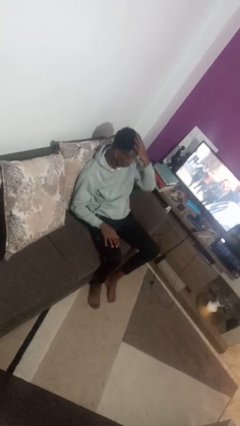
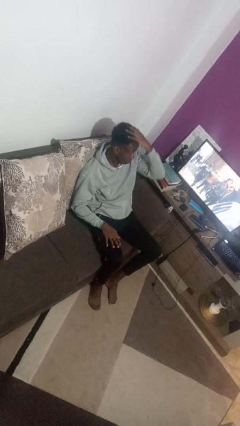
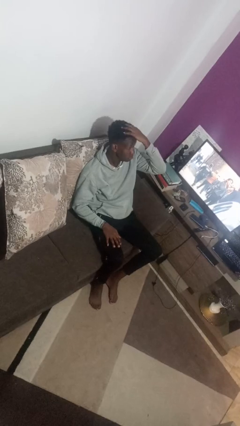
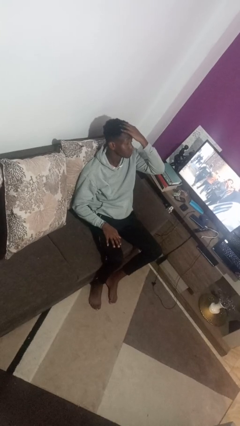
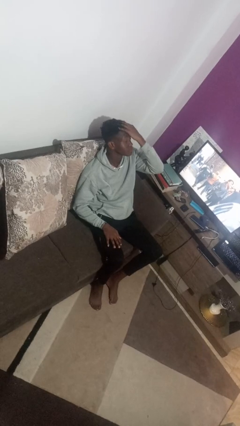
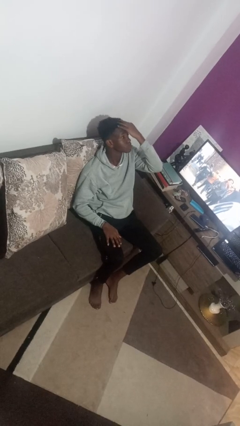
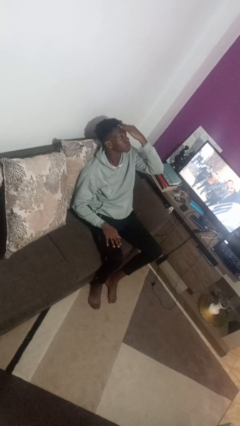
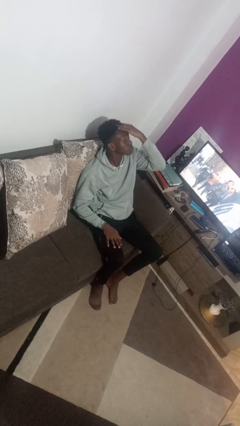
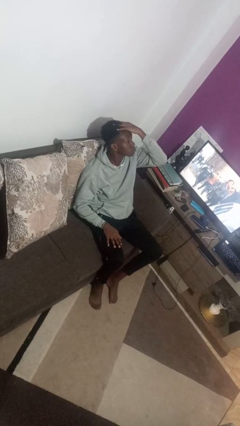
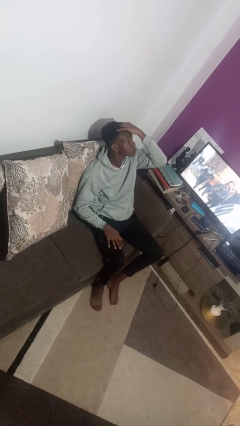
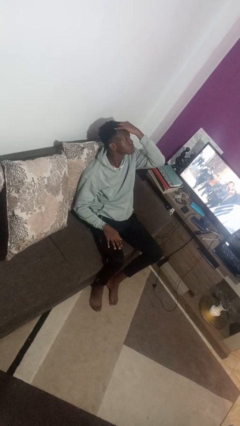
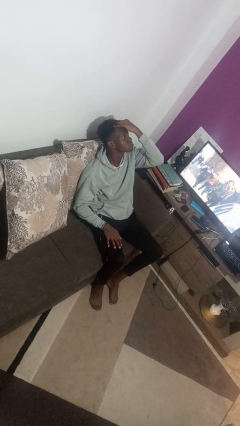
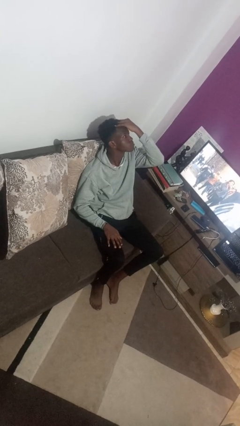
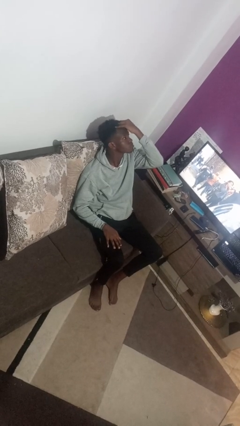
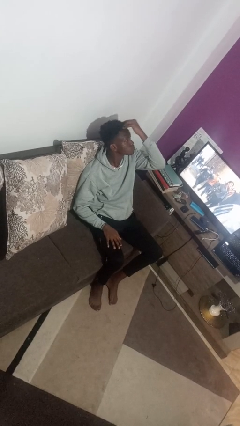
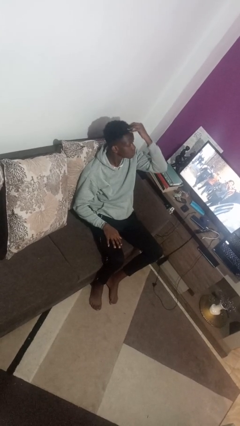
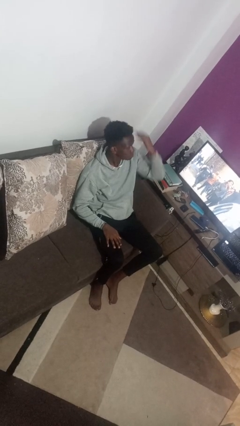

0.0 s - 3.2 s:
person strokes hair

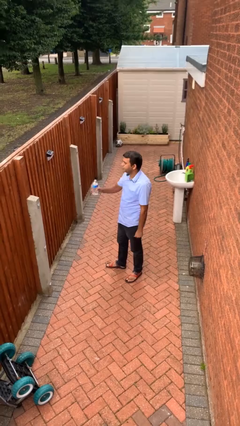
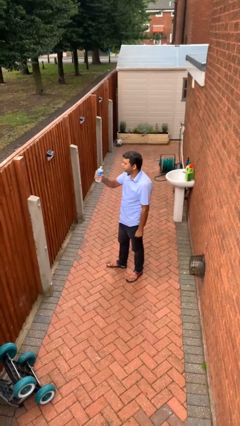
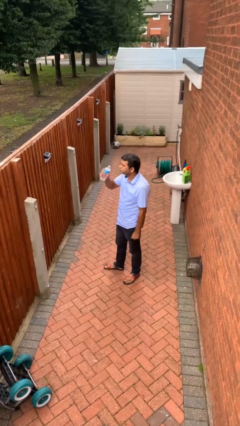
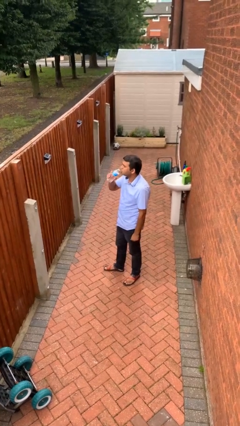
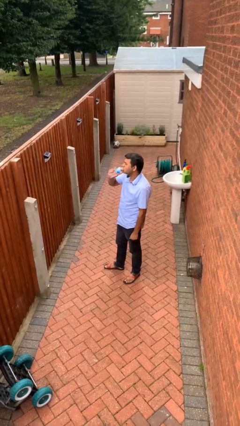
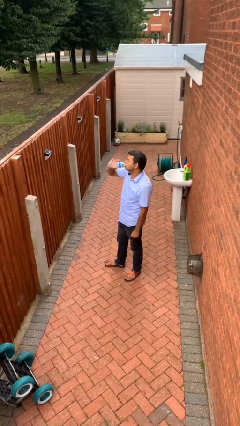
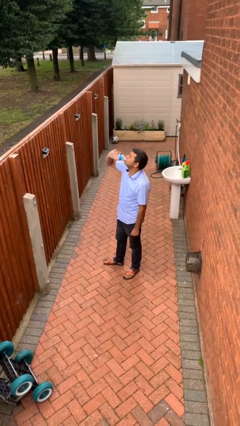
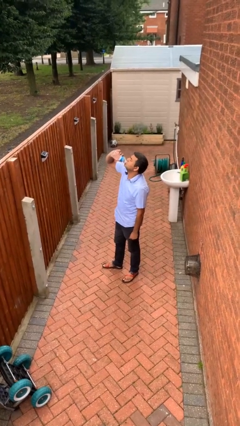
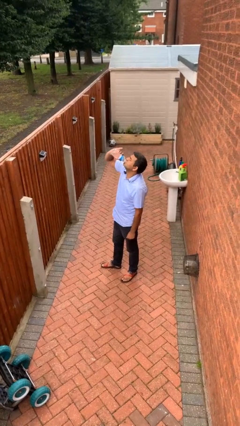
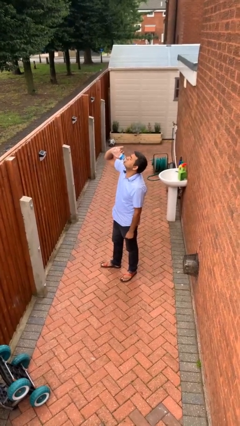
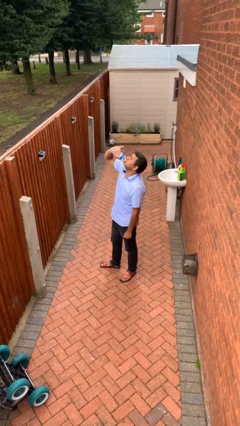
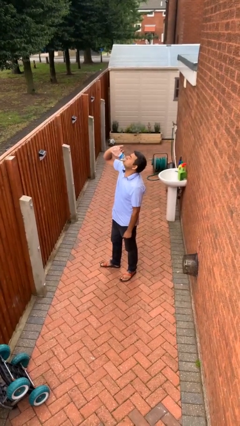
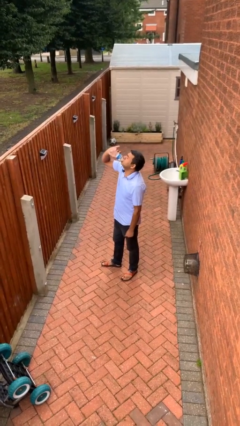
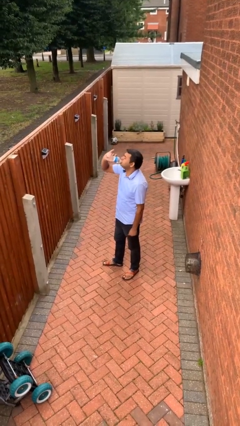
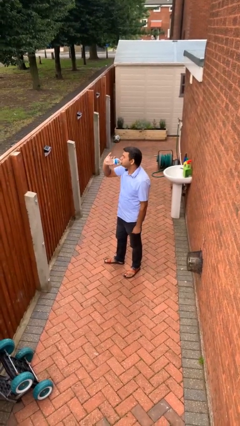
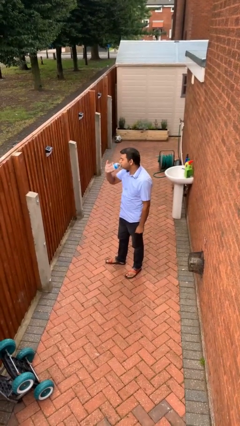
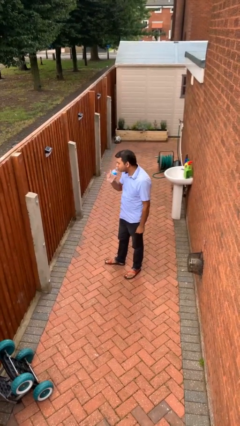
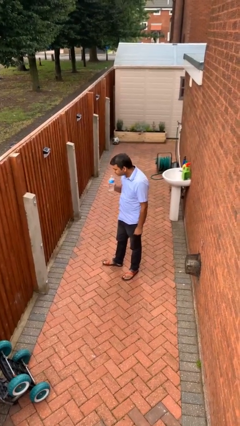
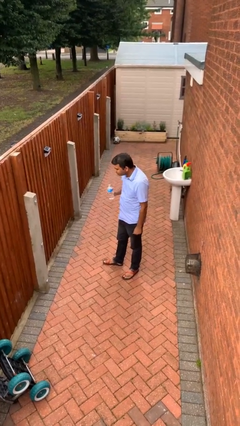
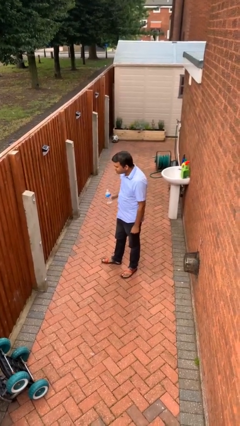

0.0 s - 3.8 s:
person drinks from bottle

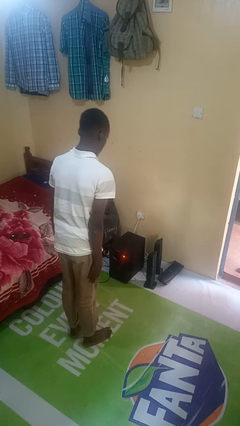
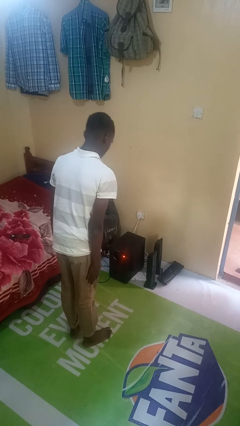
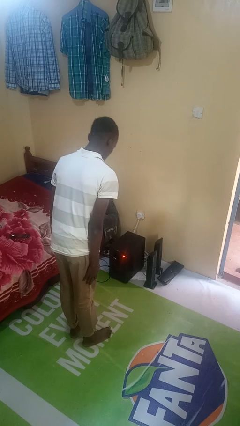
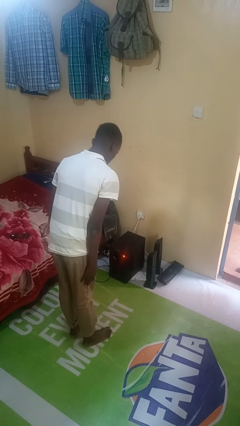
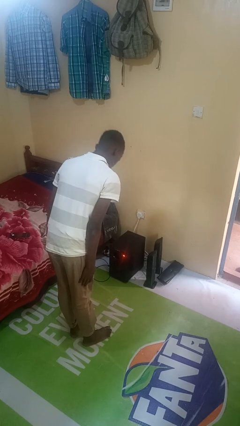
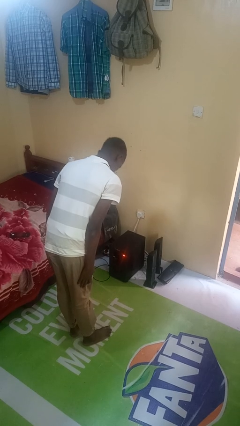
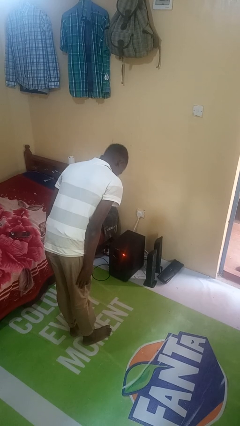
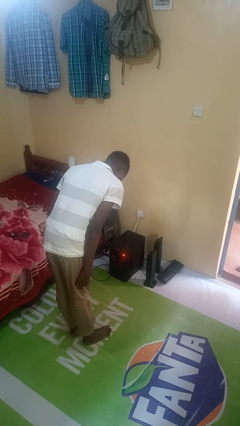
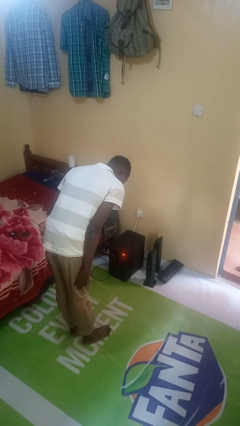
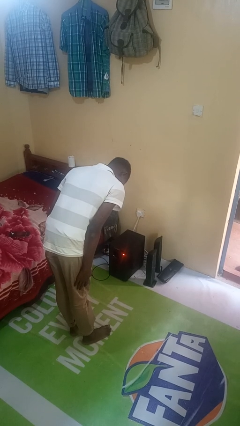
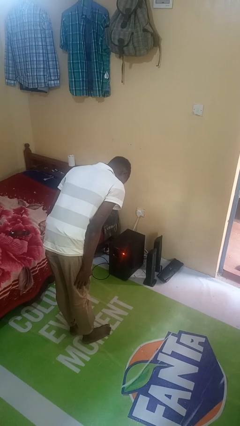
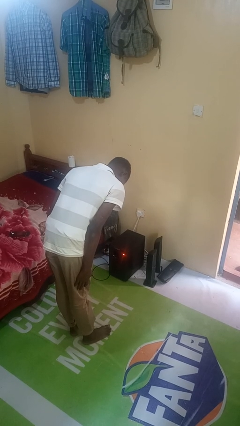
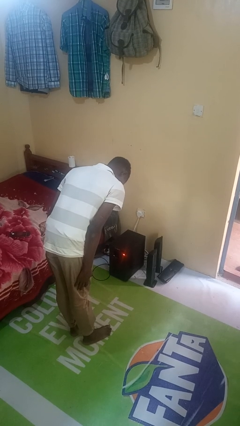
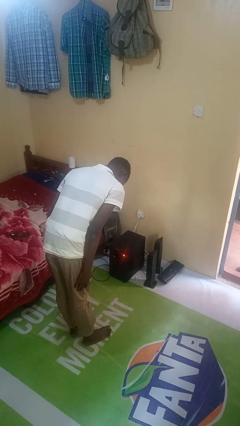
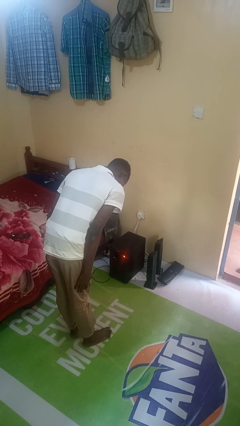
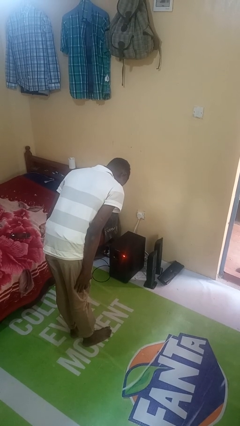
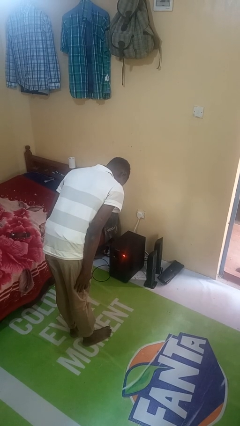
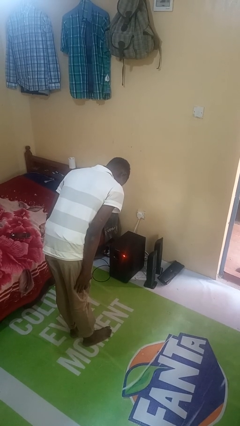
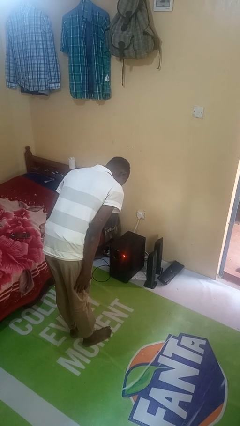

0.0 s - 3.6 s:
person bows

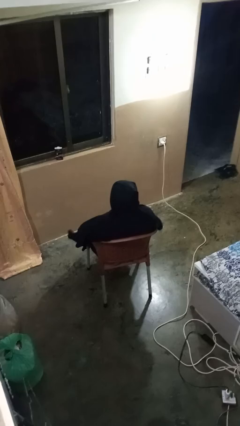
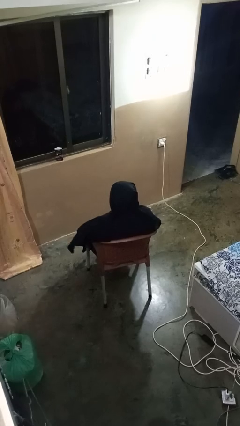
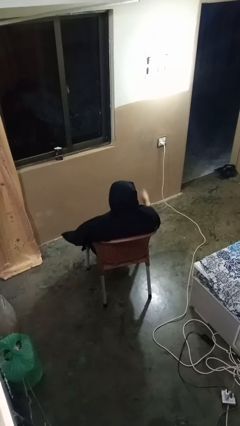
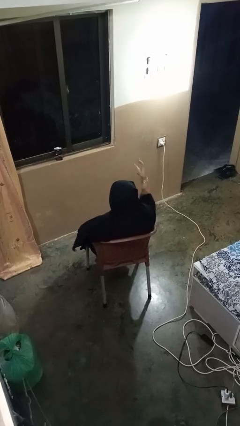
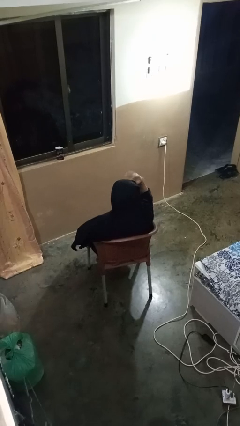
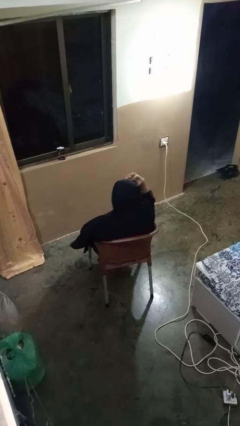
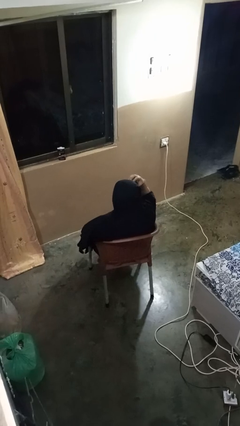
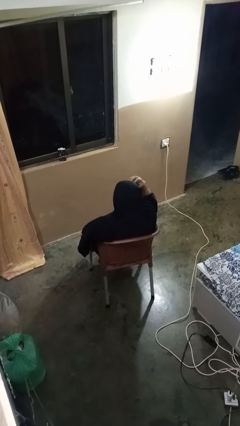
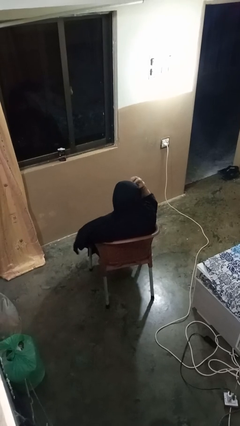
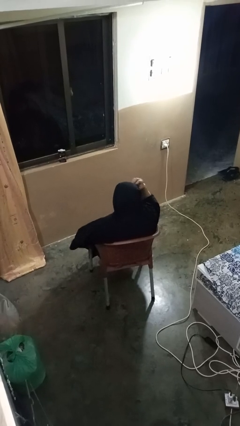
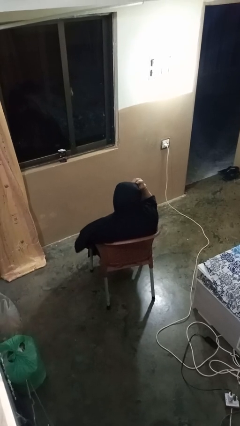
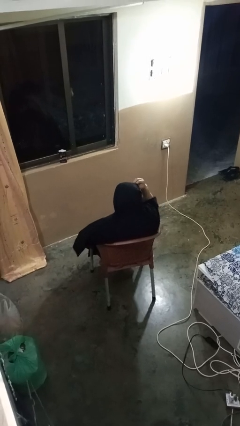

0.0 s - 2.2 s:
person scratches face

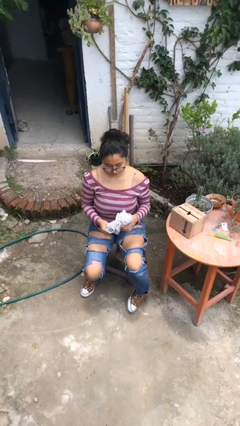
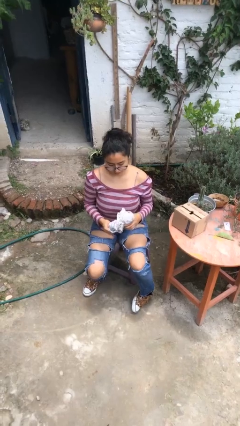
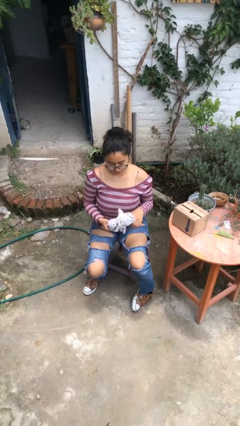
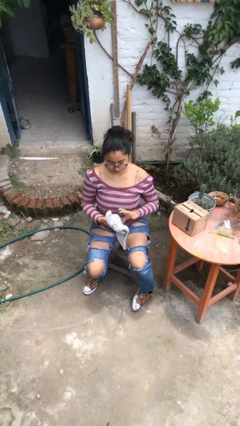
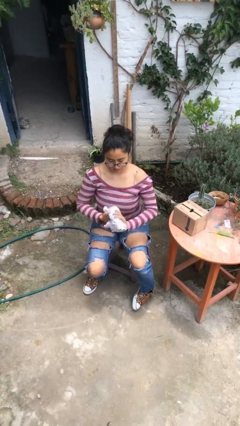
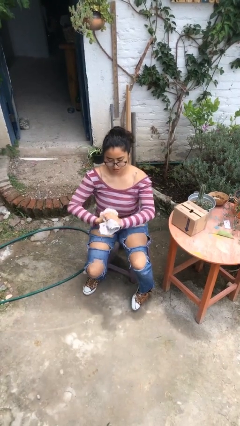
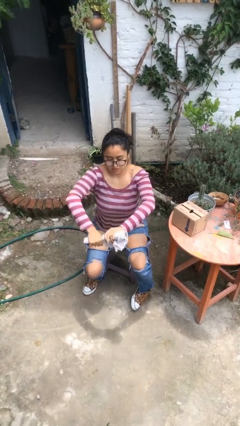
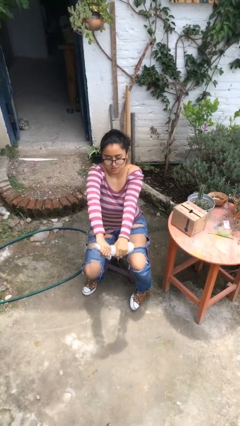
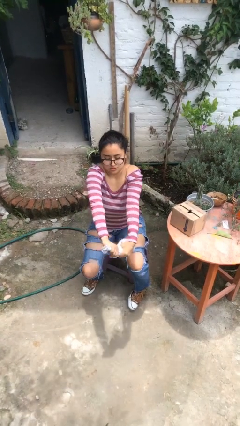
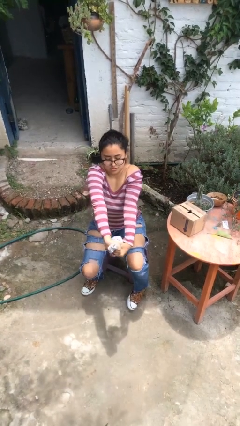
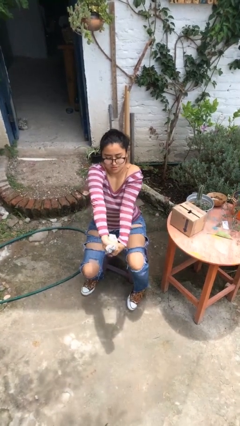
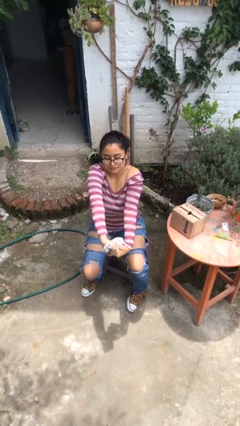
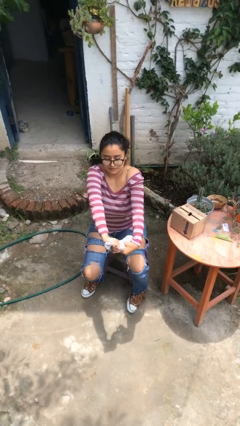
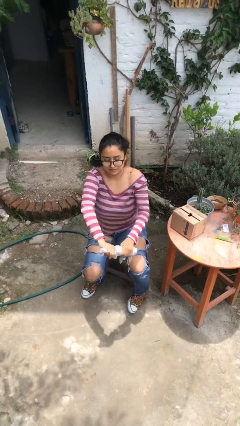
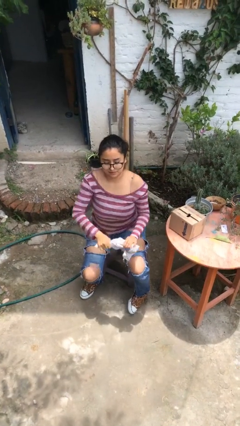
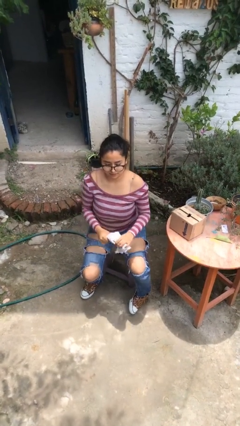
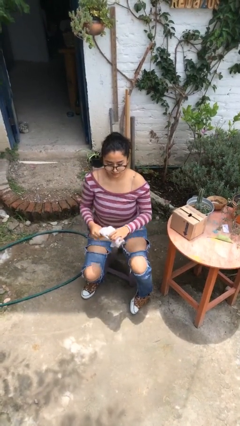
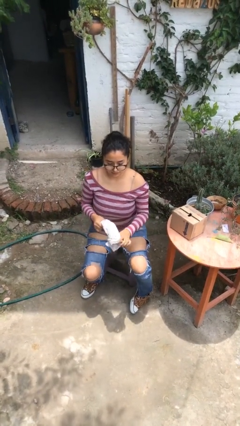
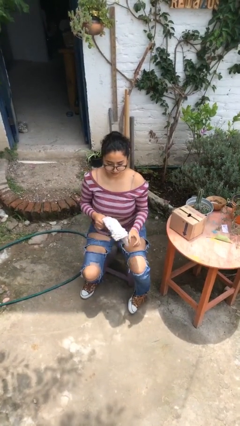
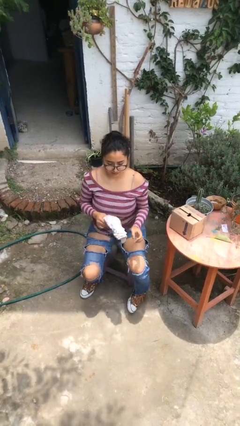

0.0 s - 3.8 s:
person squeezes object

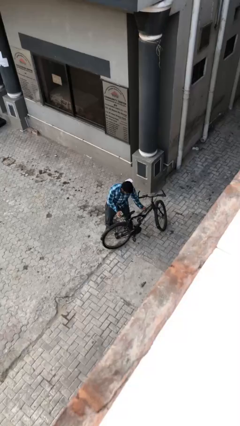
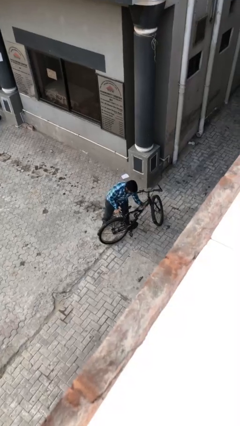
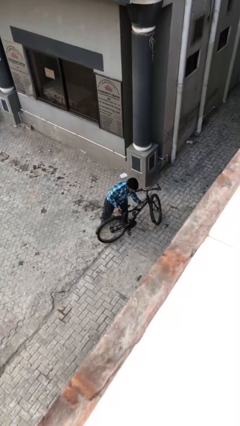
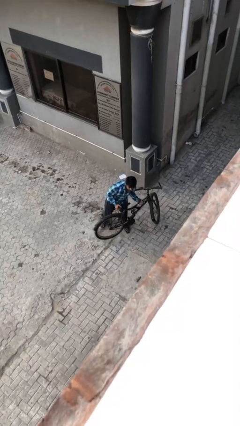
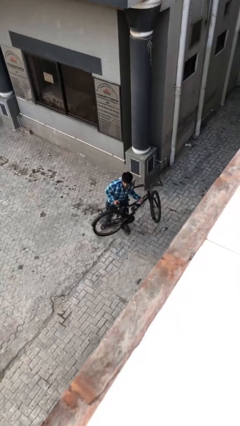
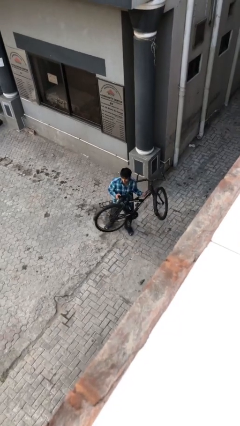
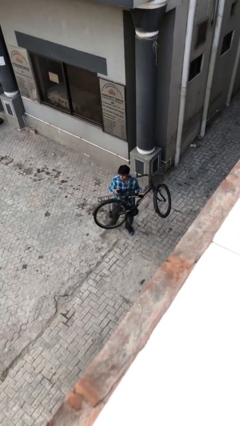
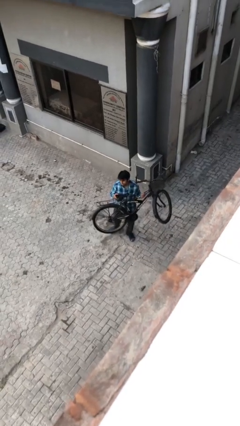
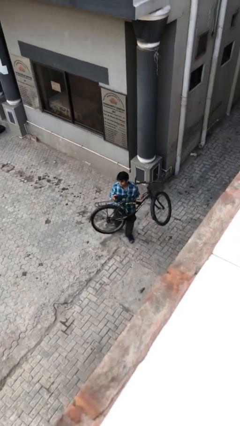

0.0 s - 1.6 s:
person picks up object from floor
